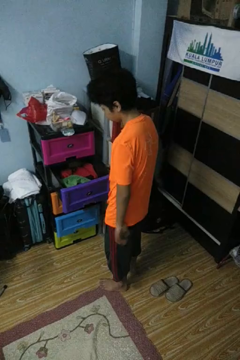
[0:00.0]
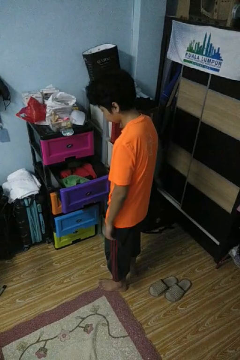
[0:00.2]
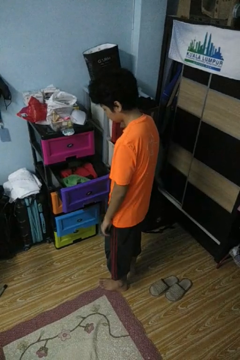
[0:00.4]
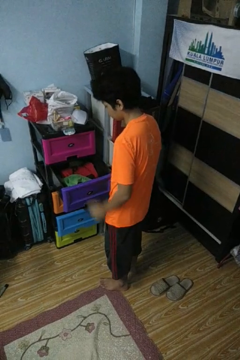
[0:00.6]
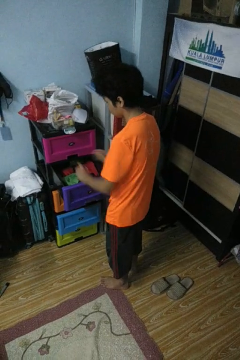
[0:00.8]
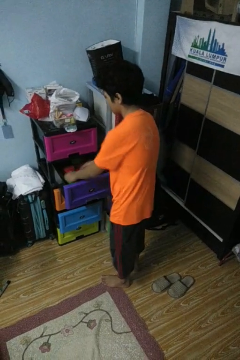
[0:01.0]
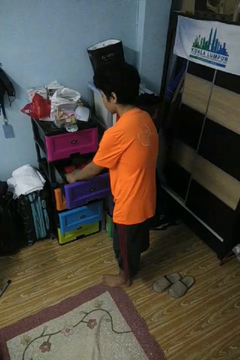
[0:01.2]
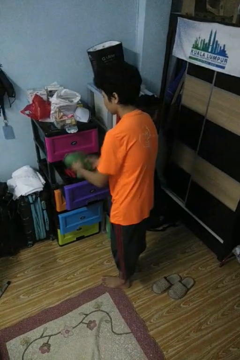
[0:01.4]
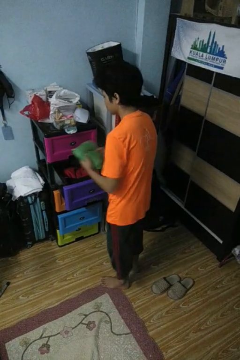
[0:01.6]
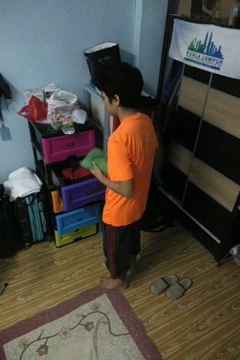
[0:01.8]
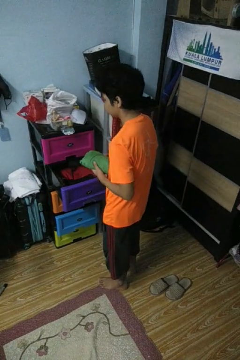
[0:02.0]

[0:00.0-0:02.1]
person takes clothes from dresser

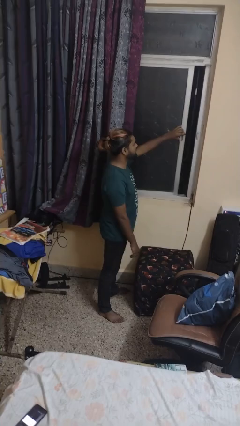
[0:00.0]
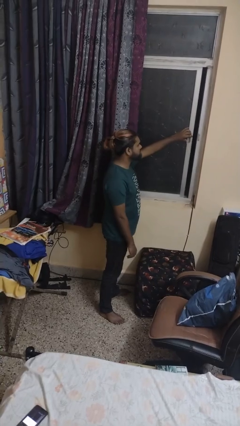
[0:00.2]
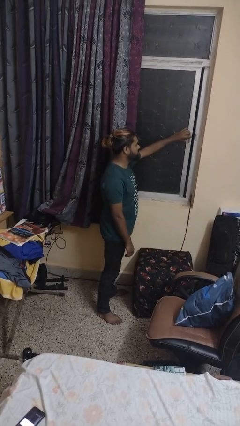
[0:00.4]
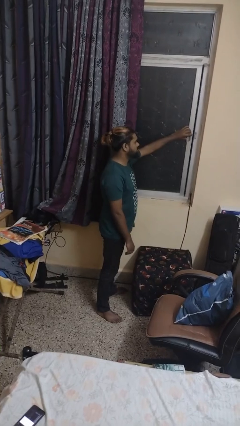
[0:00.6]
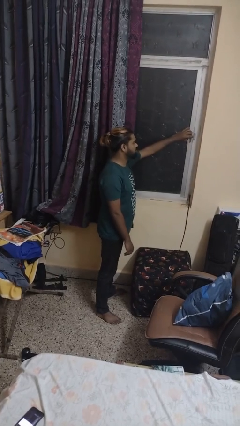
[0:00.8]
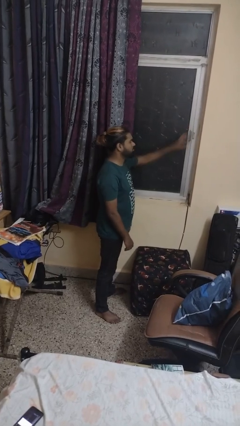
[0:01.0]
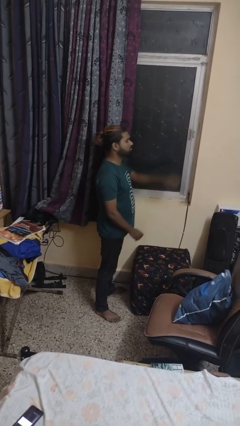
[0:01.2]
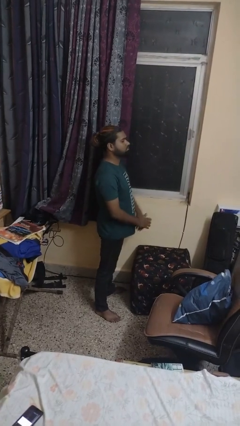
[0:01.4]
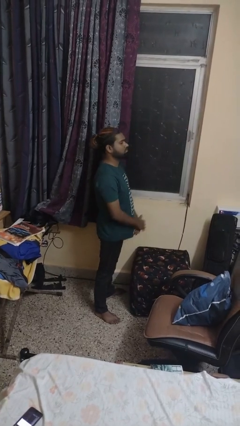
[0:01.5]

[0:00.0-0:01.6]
person closes sliding door

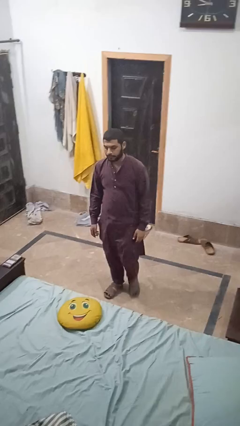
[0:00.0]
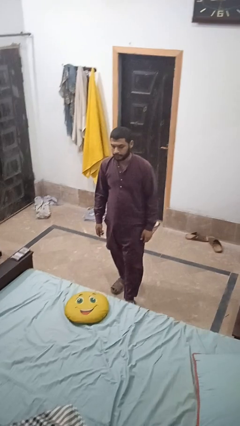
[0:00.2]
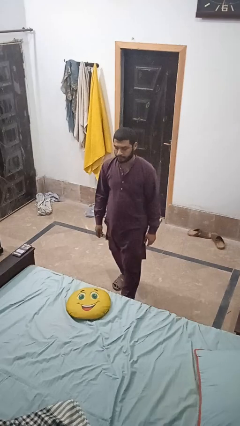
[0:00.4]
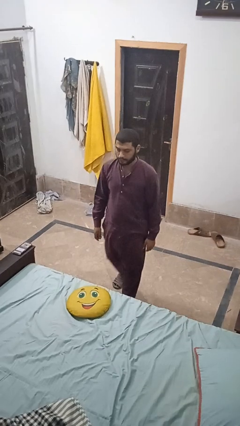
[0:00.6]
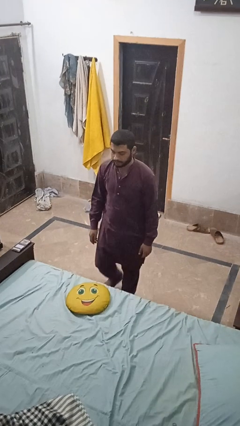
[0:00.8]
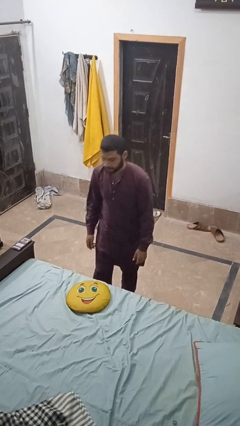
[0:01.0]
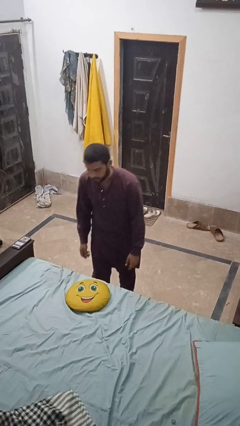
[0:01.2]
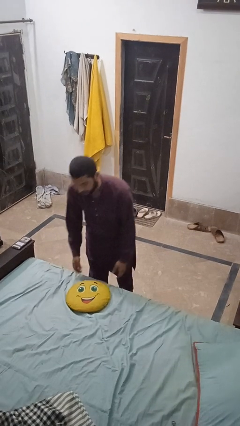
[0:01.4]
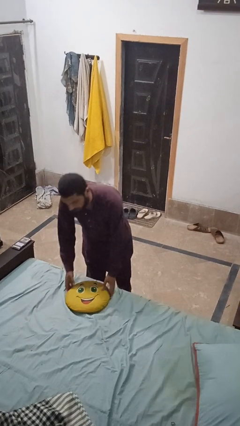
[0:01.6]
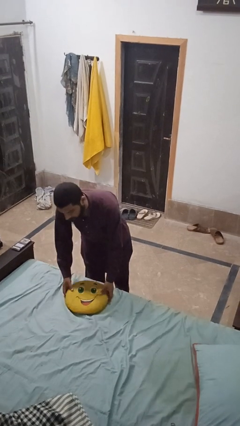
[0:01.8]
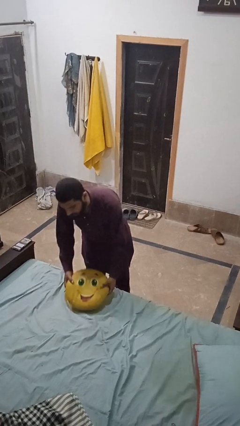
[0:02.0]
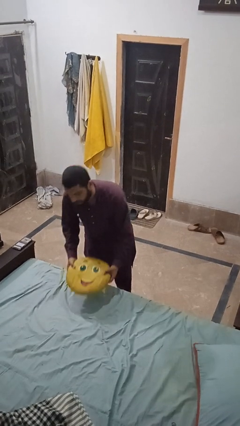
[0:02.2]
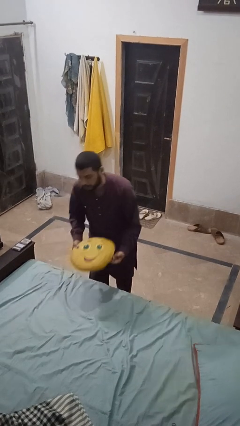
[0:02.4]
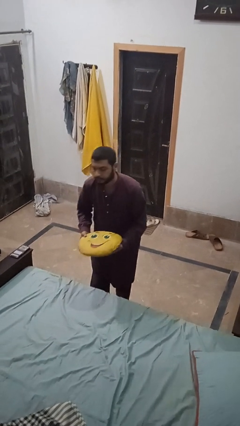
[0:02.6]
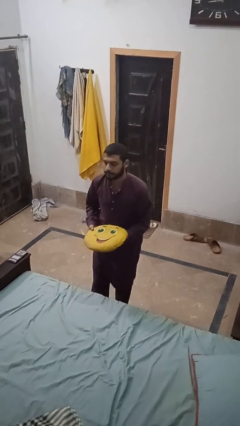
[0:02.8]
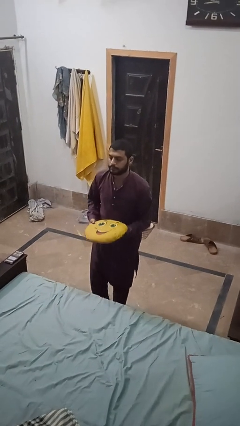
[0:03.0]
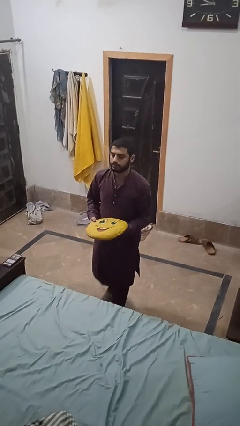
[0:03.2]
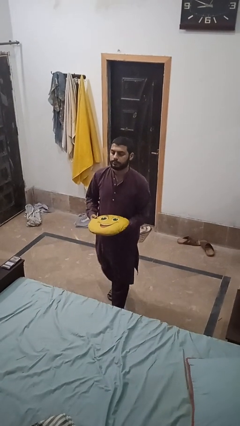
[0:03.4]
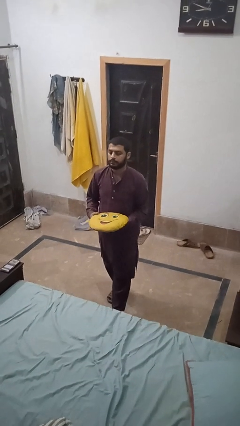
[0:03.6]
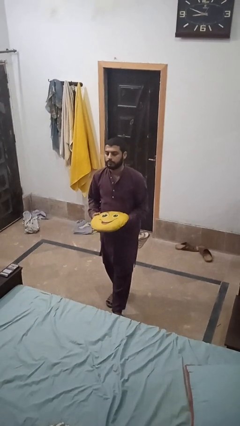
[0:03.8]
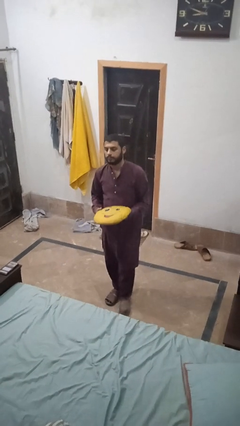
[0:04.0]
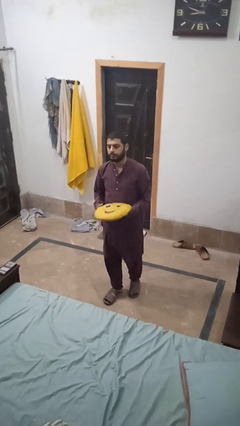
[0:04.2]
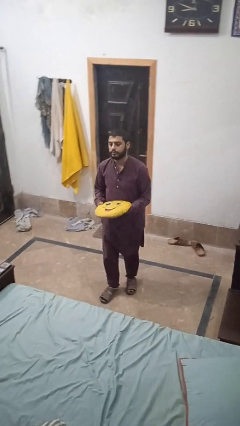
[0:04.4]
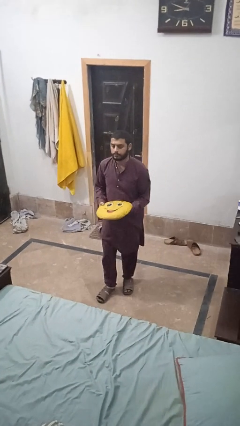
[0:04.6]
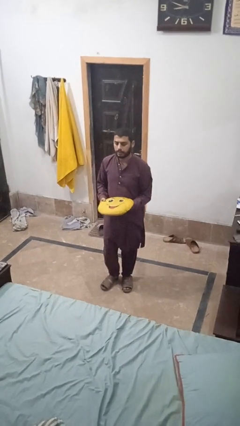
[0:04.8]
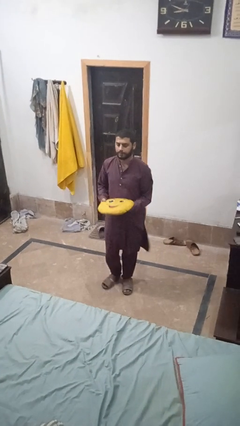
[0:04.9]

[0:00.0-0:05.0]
person picks up object from bed

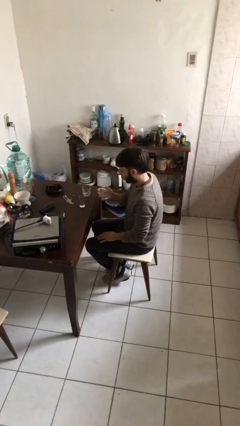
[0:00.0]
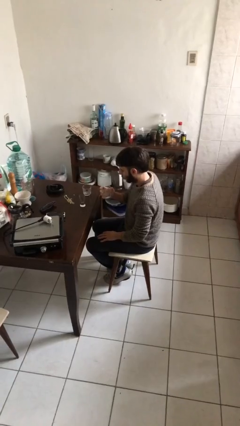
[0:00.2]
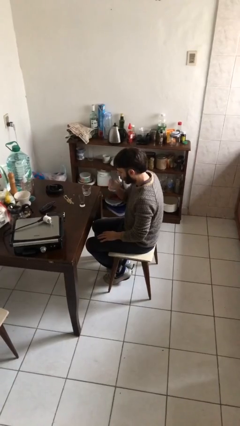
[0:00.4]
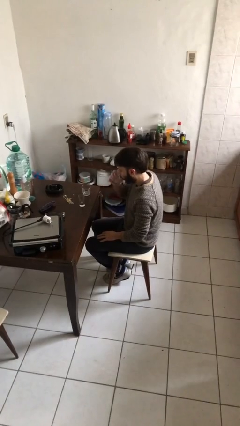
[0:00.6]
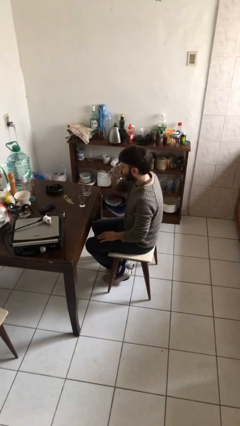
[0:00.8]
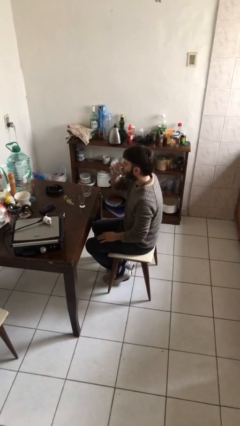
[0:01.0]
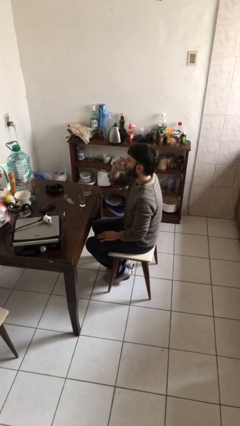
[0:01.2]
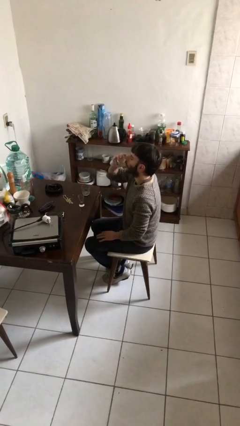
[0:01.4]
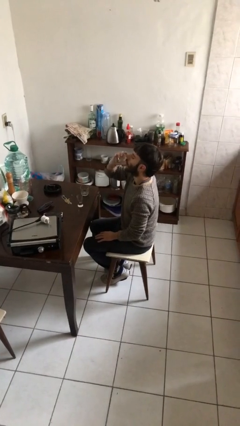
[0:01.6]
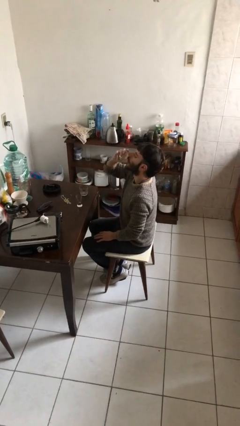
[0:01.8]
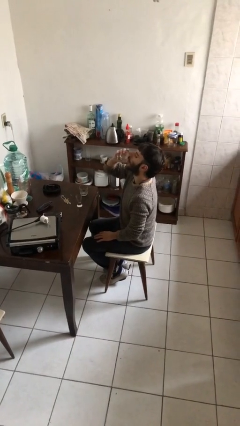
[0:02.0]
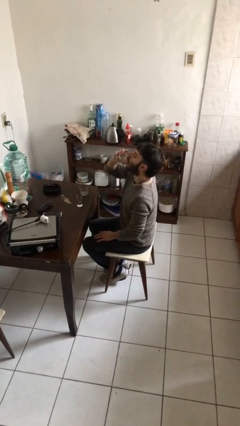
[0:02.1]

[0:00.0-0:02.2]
person drinks from shotglass

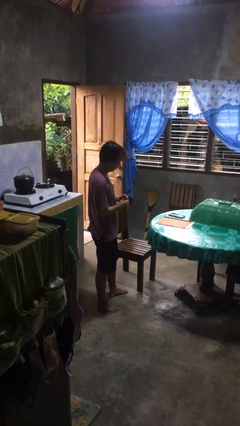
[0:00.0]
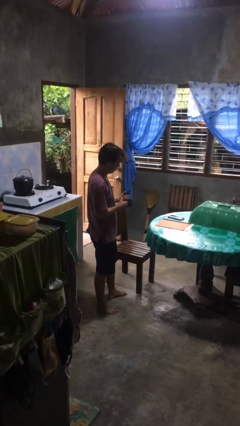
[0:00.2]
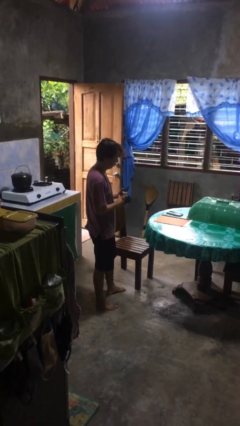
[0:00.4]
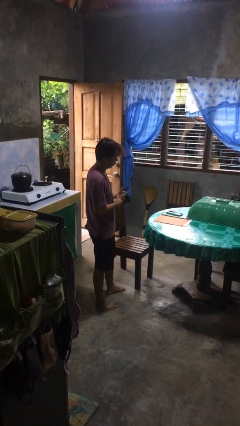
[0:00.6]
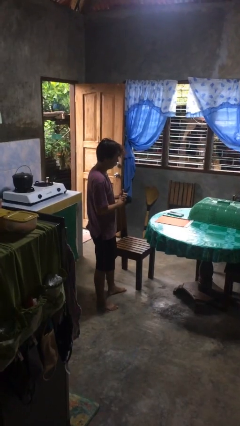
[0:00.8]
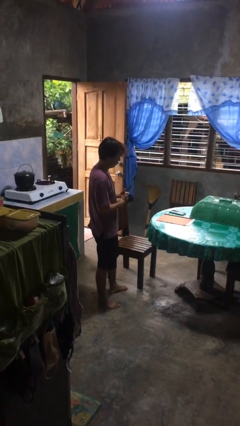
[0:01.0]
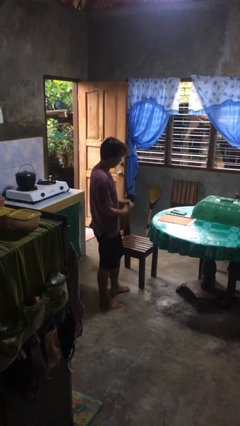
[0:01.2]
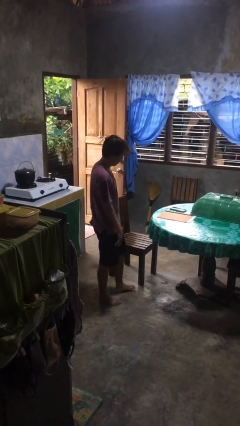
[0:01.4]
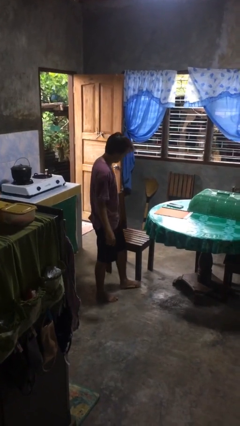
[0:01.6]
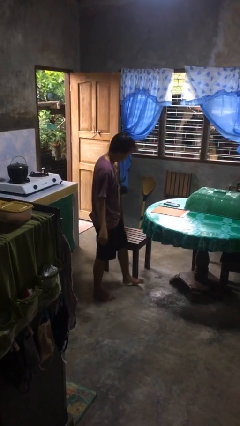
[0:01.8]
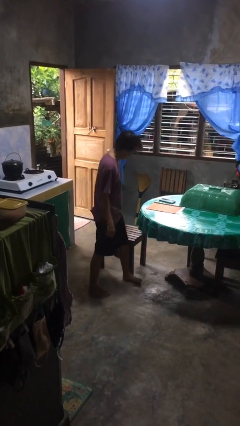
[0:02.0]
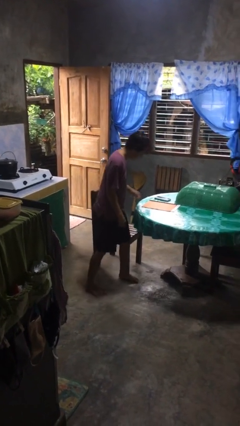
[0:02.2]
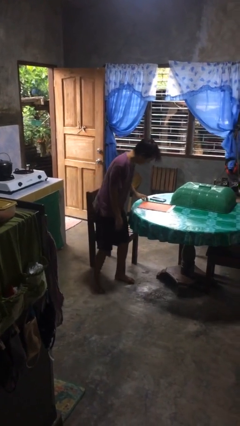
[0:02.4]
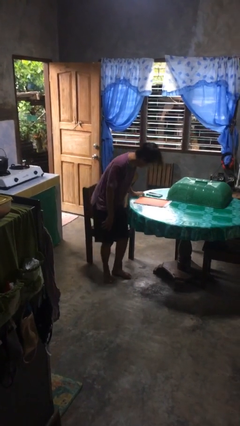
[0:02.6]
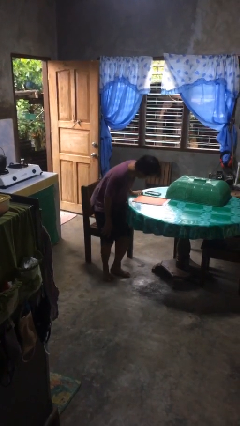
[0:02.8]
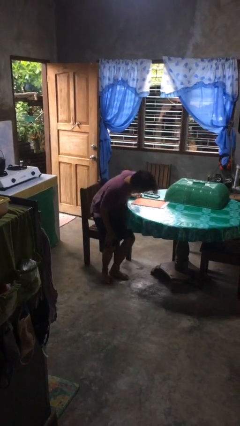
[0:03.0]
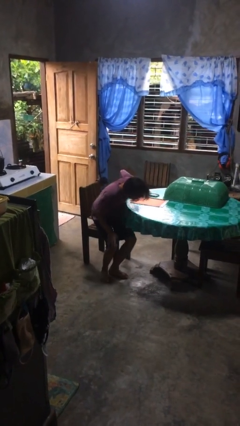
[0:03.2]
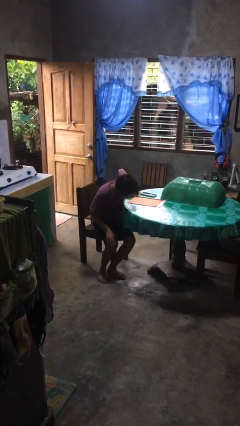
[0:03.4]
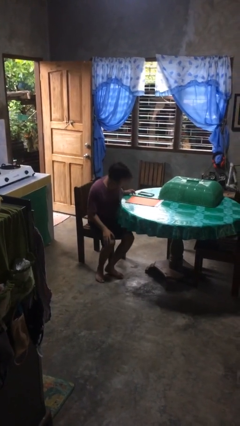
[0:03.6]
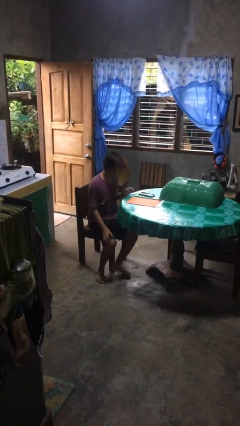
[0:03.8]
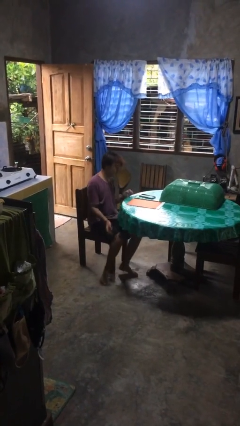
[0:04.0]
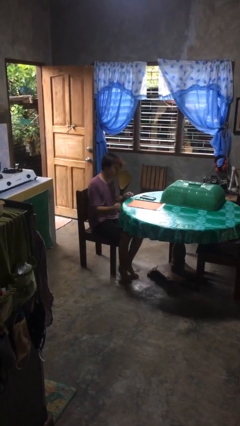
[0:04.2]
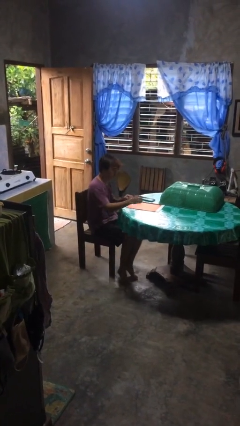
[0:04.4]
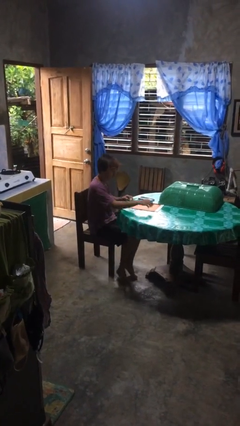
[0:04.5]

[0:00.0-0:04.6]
person sits down

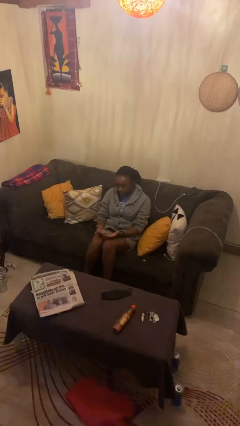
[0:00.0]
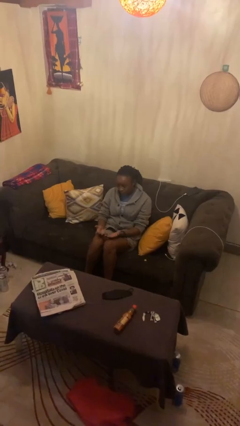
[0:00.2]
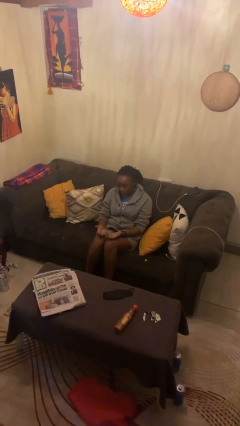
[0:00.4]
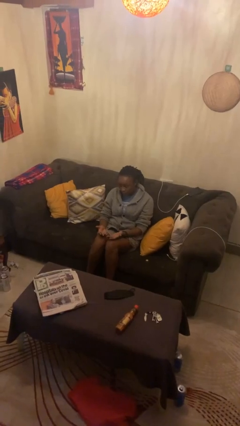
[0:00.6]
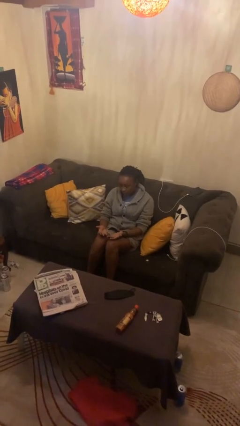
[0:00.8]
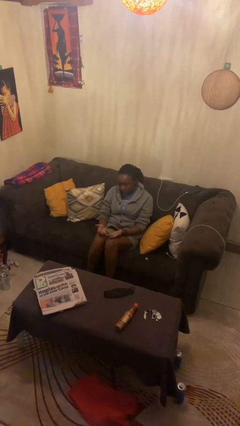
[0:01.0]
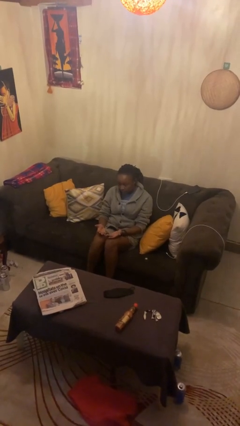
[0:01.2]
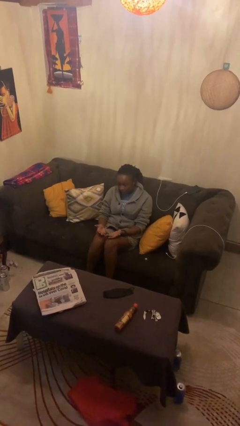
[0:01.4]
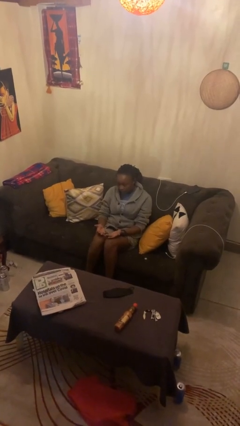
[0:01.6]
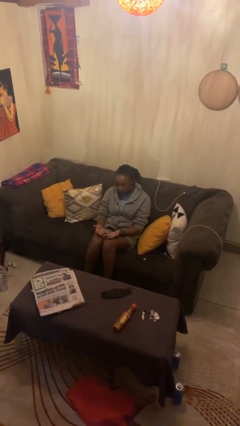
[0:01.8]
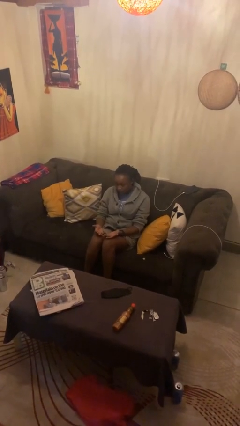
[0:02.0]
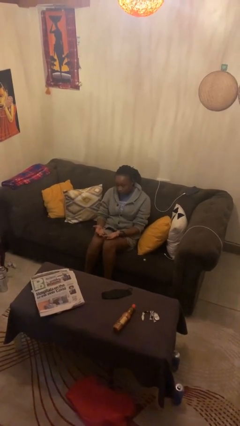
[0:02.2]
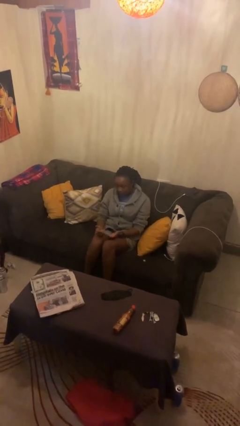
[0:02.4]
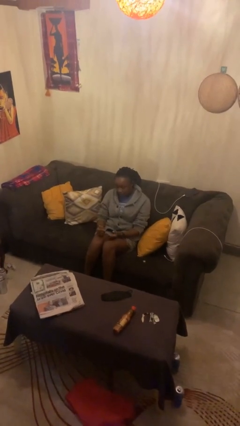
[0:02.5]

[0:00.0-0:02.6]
person looks at hands in lap
